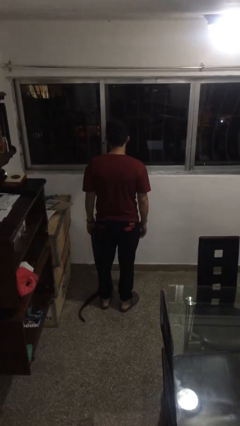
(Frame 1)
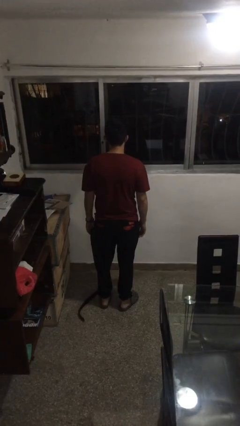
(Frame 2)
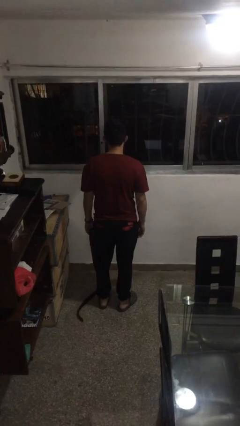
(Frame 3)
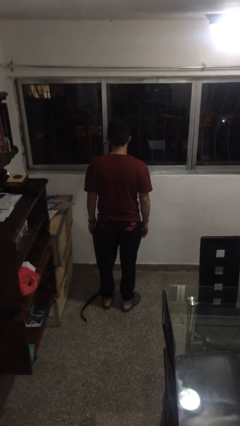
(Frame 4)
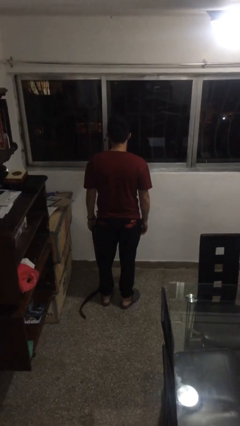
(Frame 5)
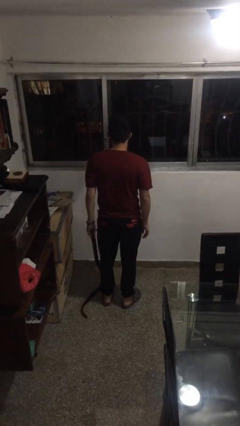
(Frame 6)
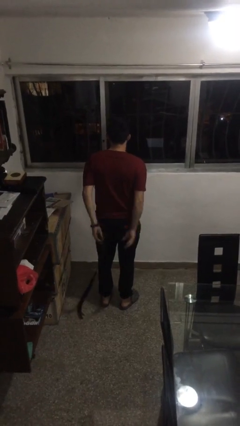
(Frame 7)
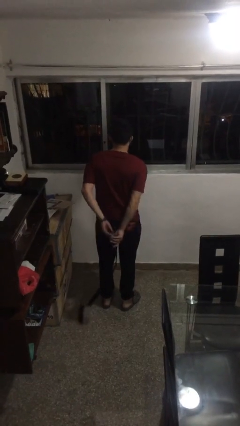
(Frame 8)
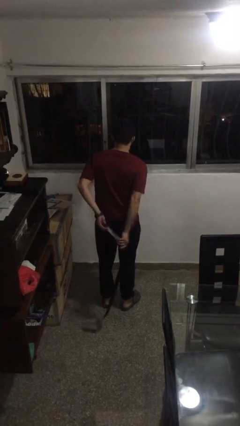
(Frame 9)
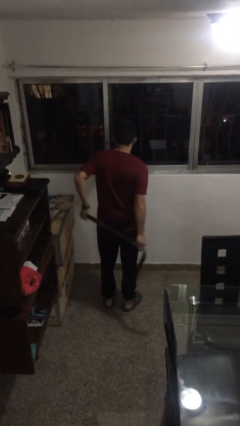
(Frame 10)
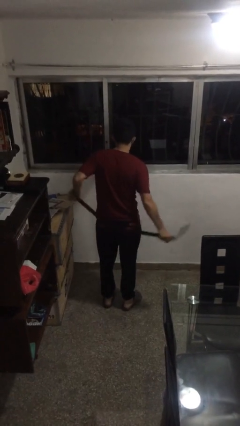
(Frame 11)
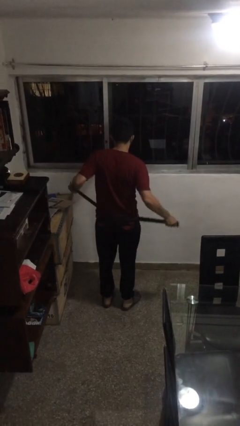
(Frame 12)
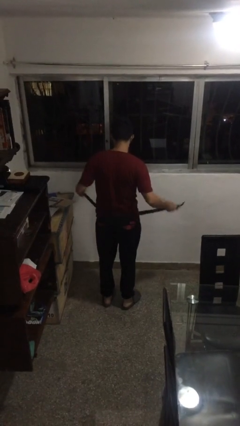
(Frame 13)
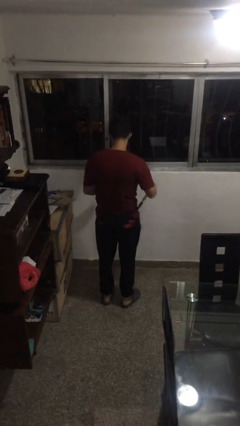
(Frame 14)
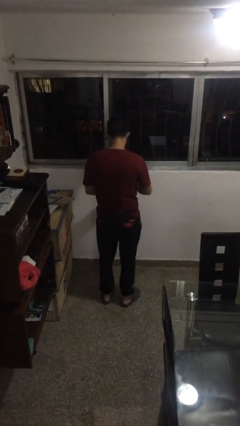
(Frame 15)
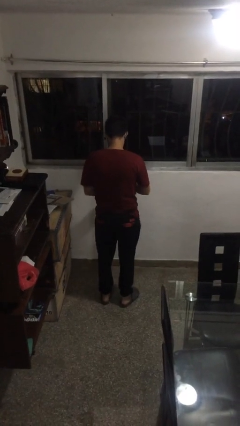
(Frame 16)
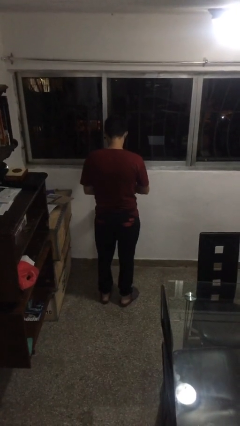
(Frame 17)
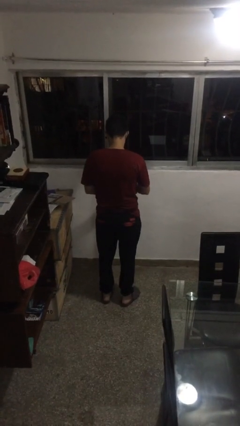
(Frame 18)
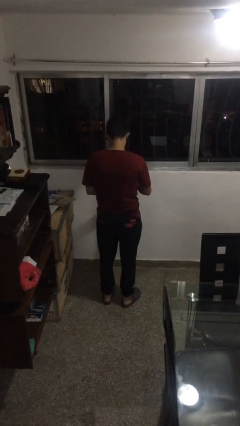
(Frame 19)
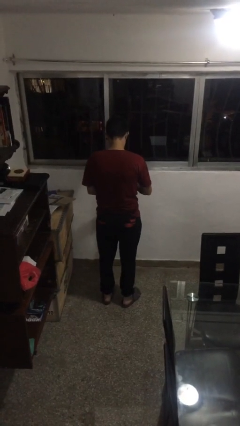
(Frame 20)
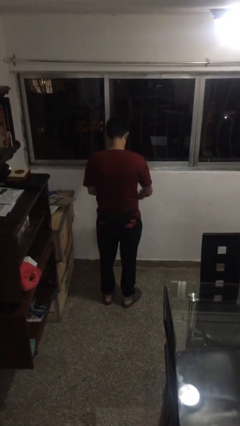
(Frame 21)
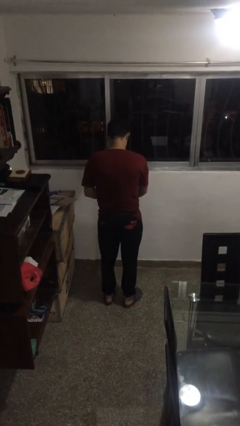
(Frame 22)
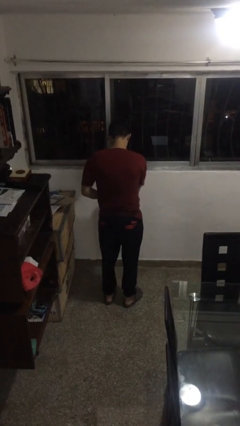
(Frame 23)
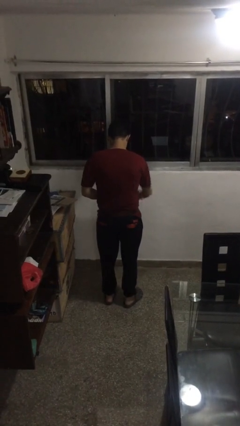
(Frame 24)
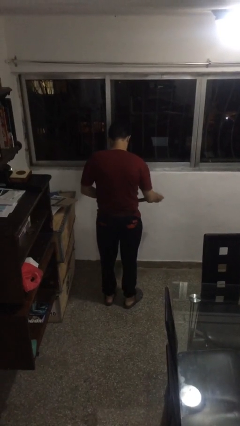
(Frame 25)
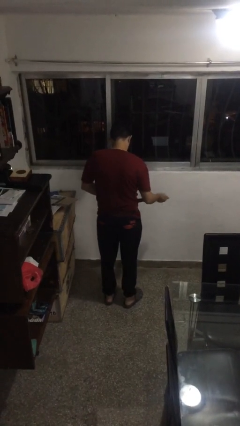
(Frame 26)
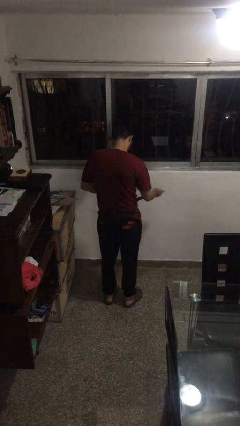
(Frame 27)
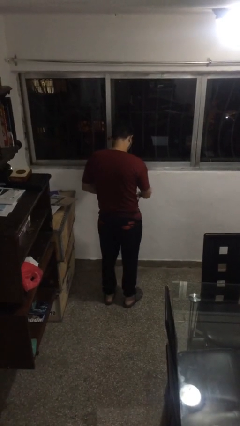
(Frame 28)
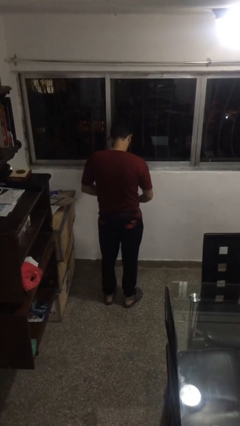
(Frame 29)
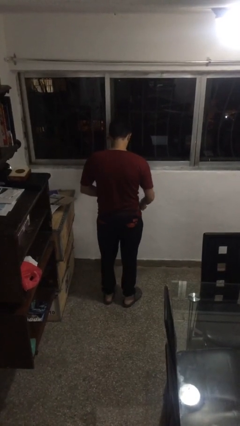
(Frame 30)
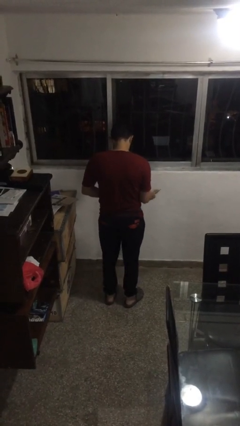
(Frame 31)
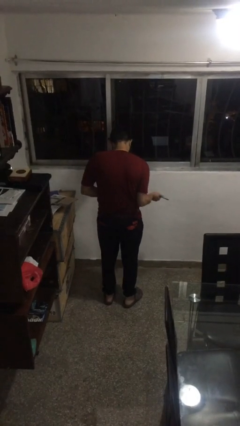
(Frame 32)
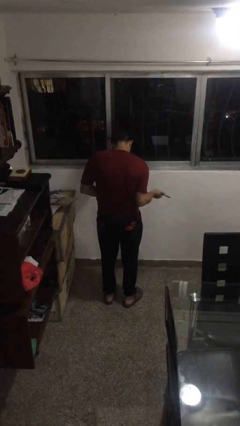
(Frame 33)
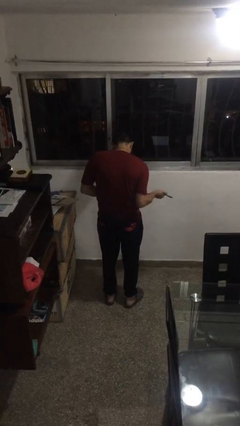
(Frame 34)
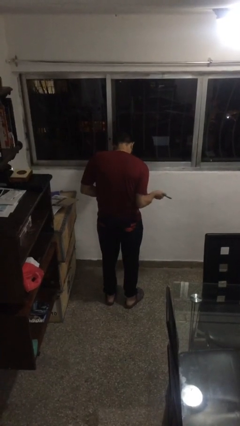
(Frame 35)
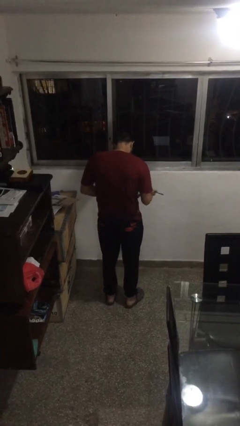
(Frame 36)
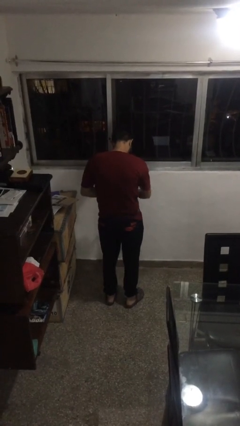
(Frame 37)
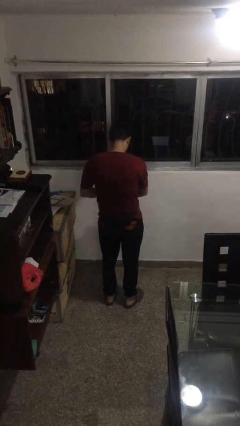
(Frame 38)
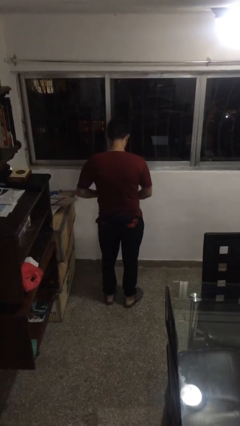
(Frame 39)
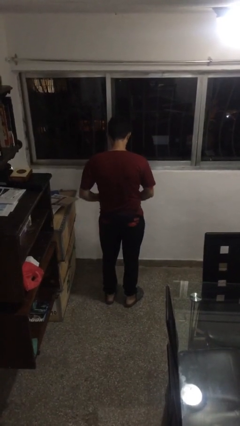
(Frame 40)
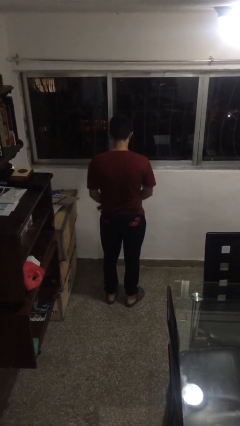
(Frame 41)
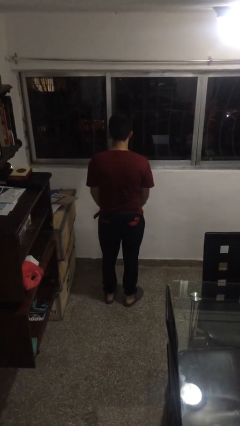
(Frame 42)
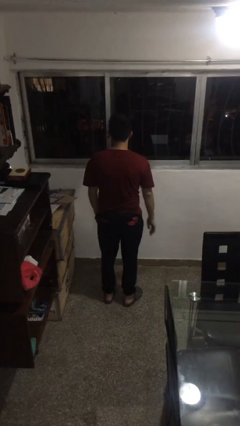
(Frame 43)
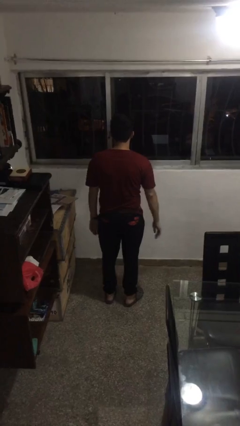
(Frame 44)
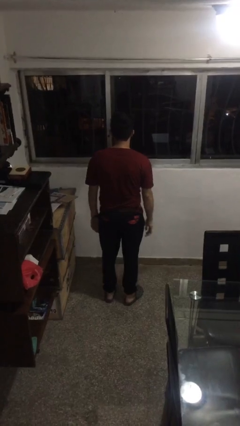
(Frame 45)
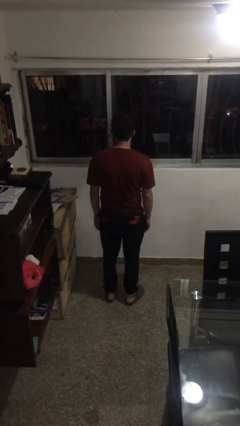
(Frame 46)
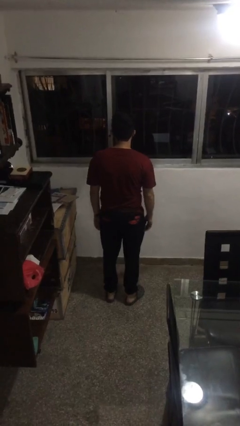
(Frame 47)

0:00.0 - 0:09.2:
person puts on belt

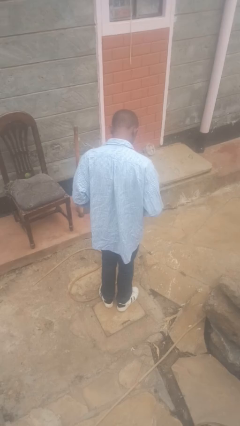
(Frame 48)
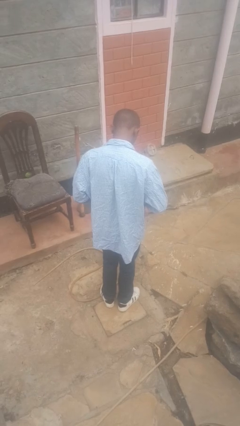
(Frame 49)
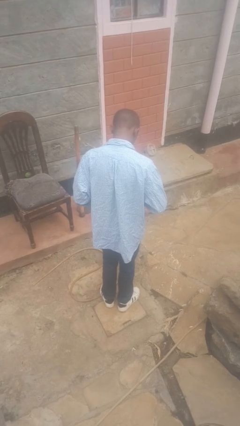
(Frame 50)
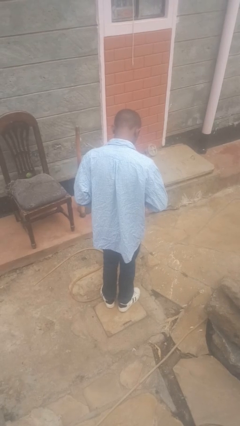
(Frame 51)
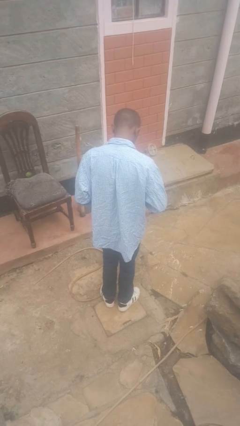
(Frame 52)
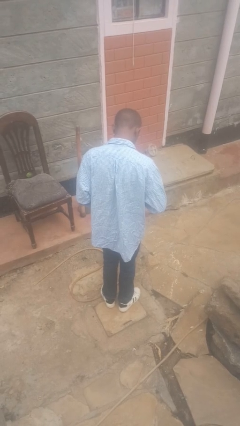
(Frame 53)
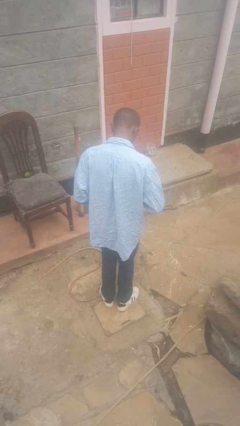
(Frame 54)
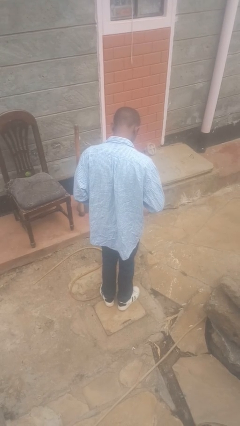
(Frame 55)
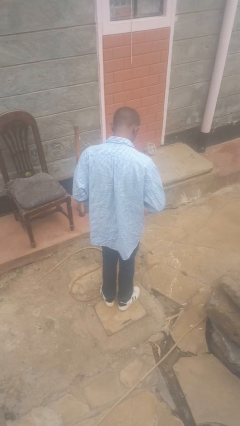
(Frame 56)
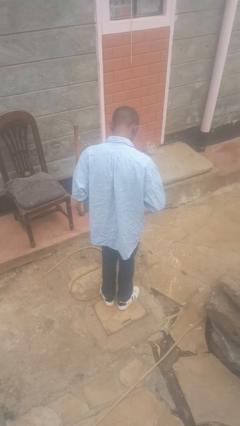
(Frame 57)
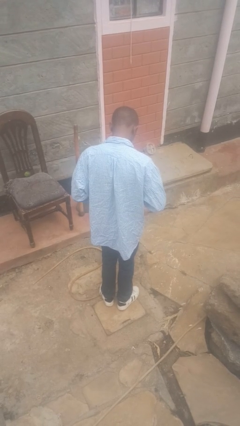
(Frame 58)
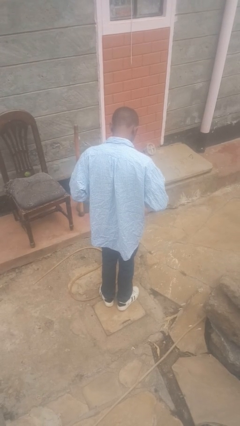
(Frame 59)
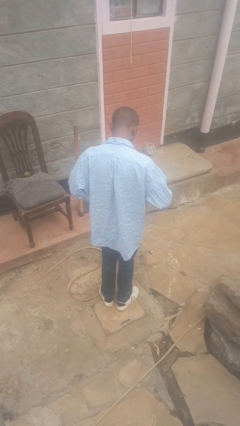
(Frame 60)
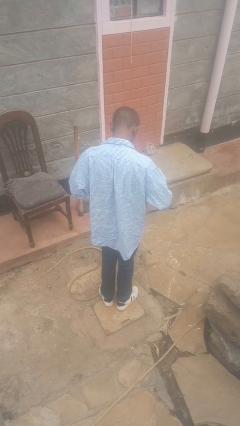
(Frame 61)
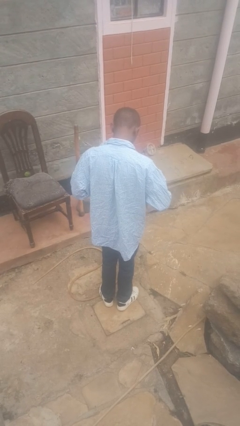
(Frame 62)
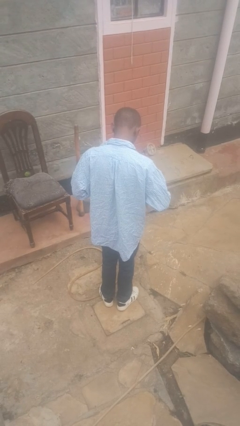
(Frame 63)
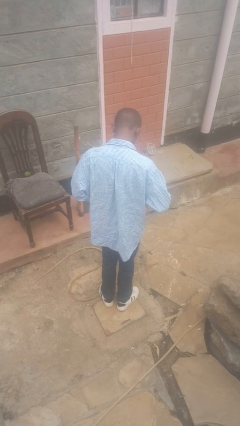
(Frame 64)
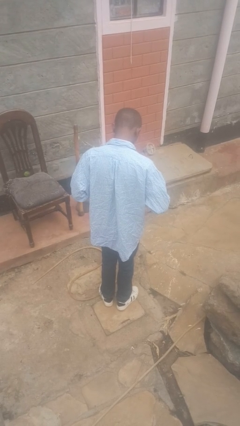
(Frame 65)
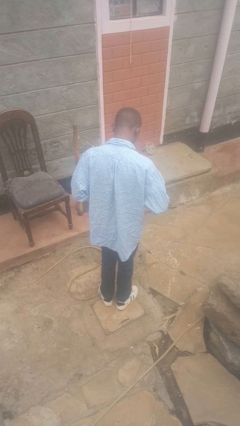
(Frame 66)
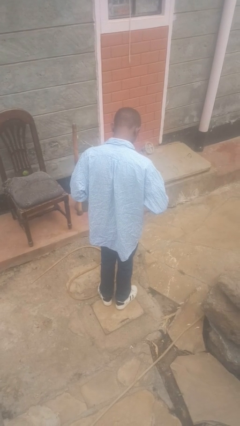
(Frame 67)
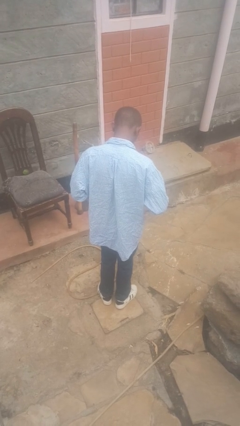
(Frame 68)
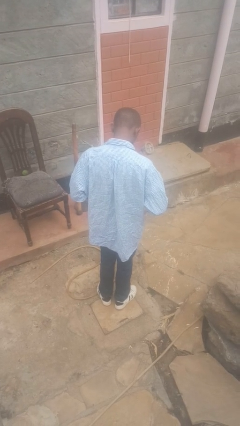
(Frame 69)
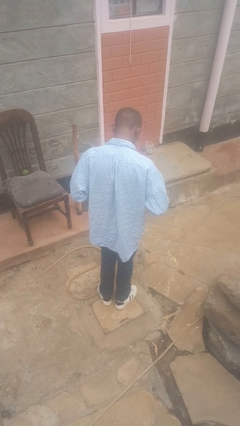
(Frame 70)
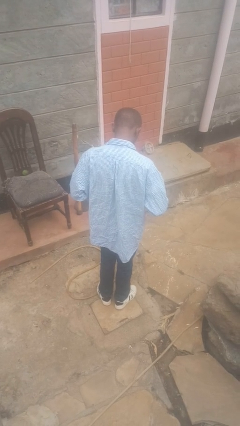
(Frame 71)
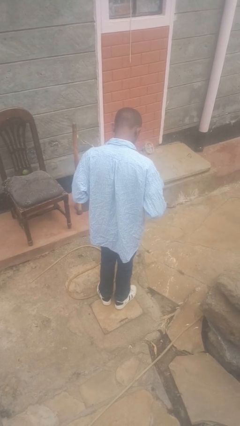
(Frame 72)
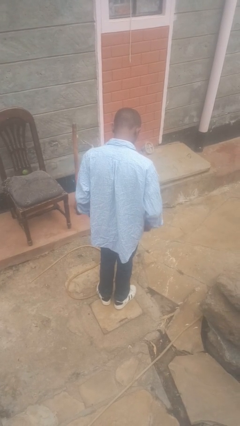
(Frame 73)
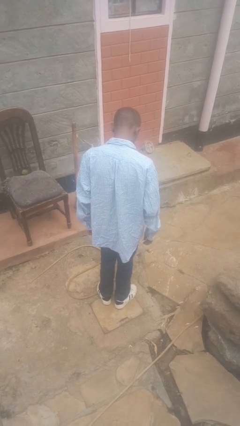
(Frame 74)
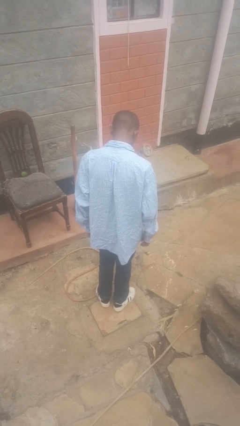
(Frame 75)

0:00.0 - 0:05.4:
person buttons shirt

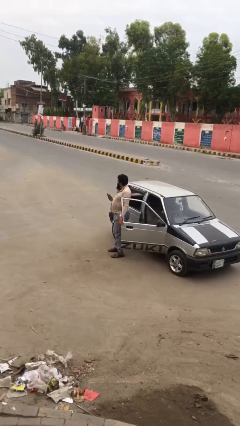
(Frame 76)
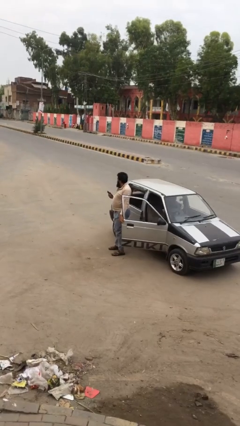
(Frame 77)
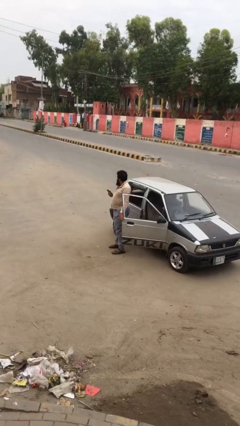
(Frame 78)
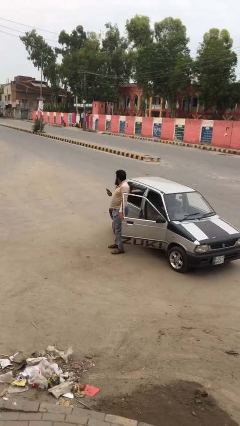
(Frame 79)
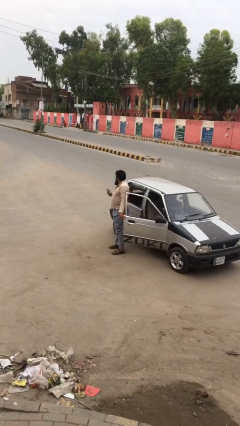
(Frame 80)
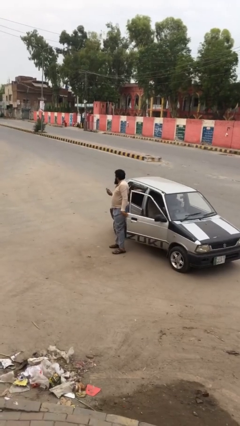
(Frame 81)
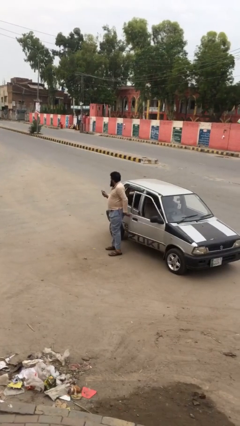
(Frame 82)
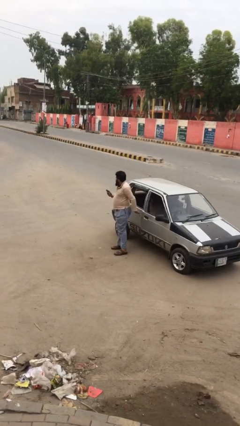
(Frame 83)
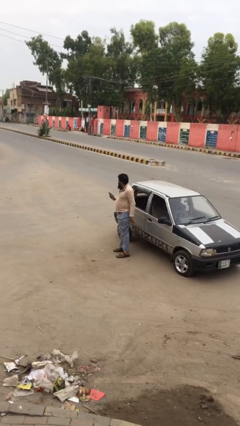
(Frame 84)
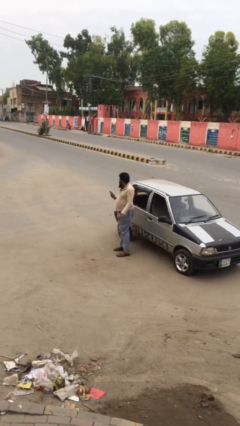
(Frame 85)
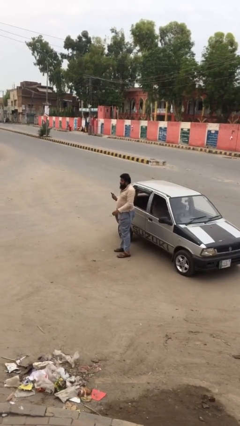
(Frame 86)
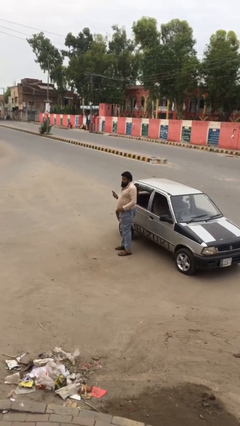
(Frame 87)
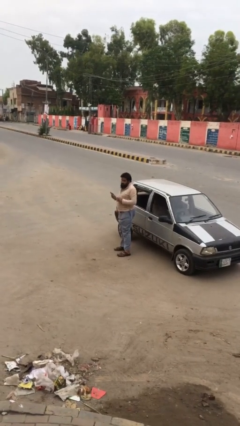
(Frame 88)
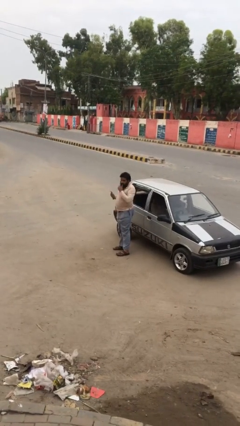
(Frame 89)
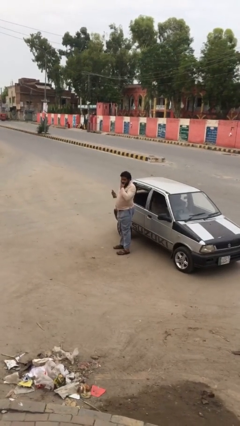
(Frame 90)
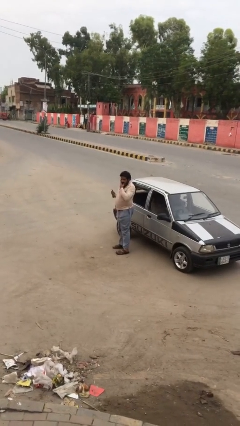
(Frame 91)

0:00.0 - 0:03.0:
person closes car door

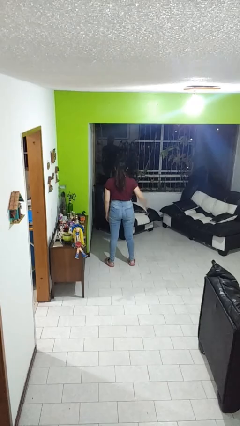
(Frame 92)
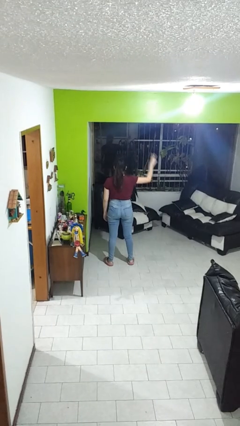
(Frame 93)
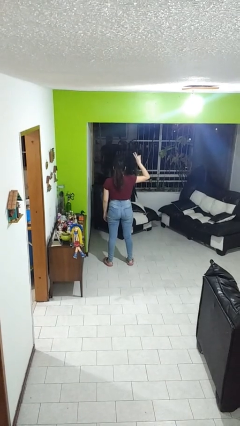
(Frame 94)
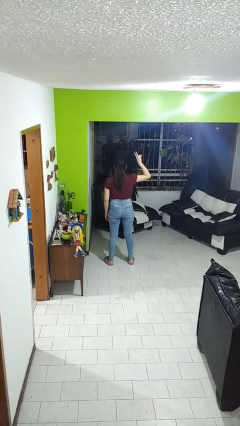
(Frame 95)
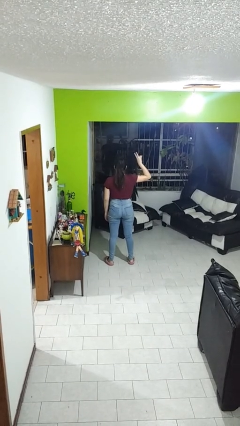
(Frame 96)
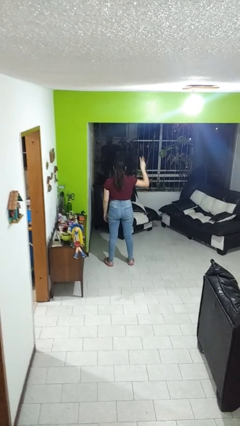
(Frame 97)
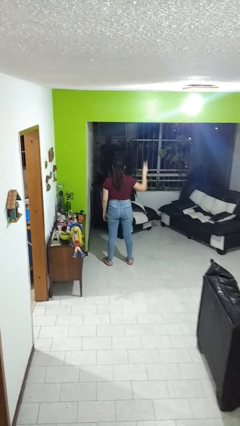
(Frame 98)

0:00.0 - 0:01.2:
person gestures peace
